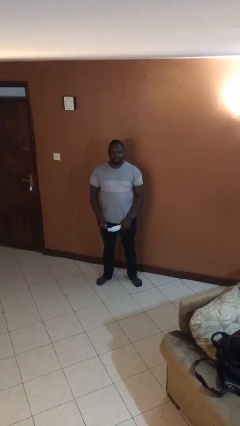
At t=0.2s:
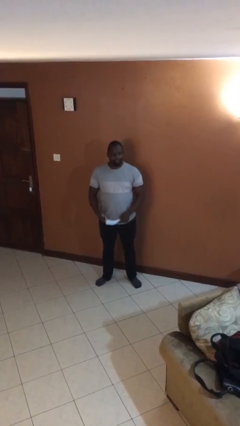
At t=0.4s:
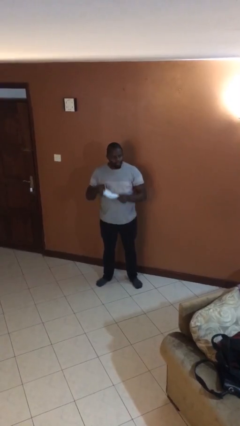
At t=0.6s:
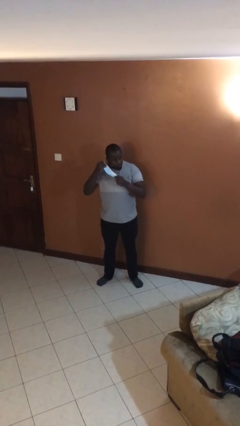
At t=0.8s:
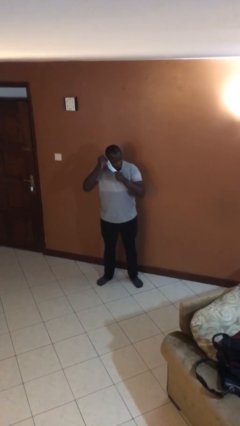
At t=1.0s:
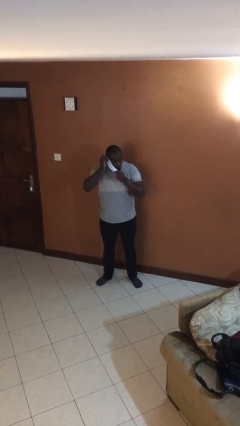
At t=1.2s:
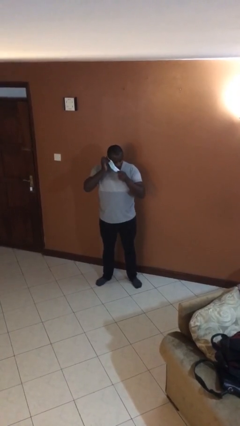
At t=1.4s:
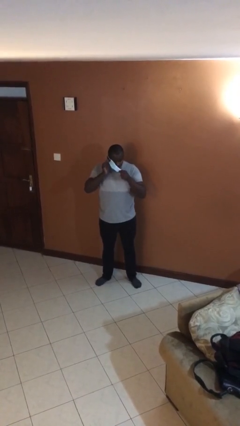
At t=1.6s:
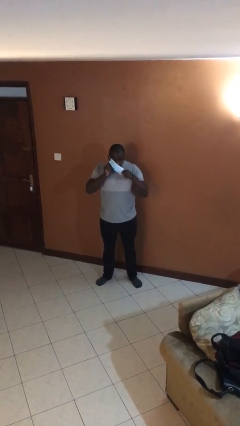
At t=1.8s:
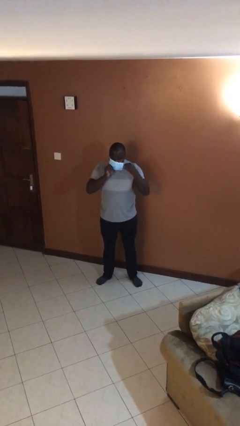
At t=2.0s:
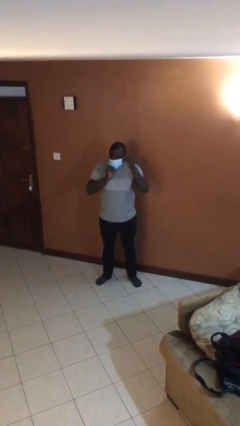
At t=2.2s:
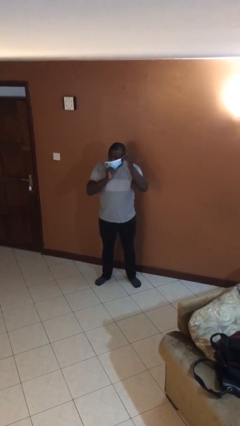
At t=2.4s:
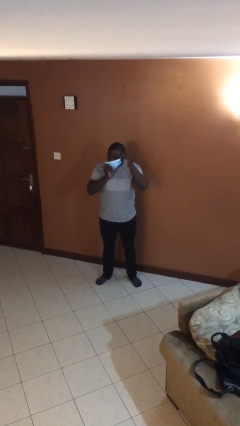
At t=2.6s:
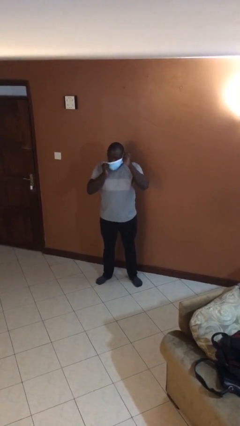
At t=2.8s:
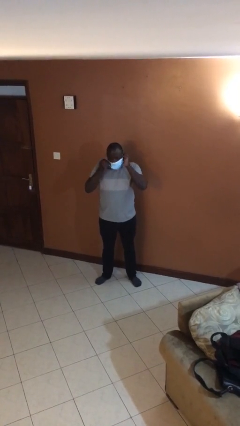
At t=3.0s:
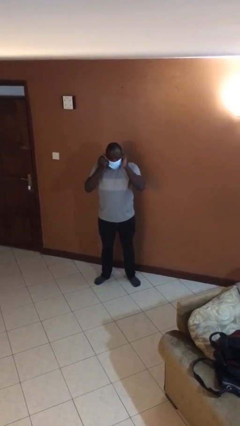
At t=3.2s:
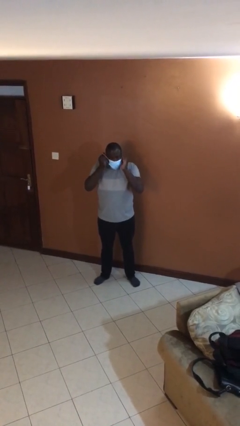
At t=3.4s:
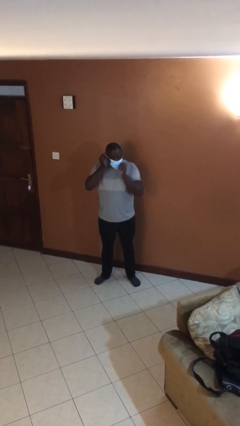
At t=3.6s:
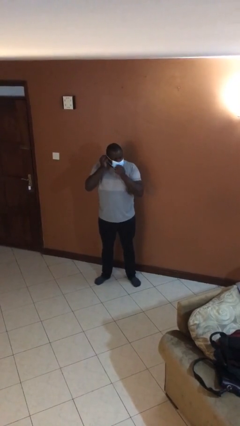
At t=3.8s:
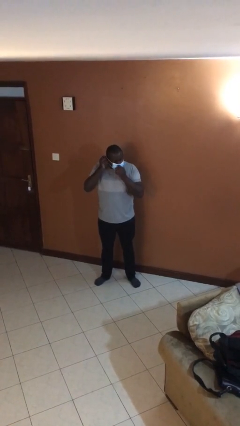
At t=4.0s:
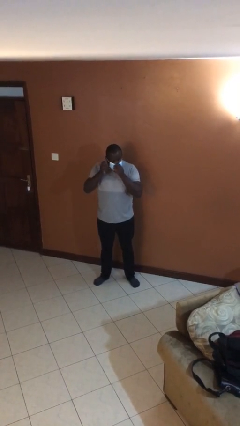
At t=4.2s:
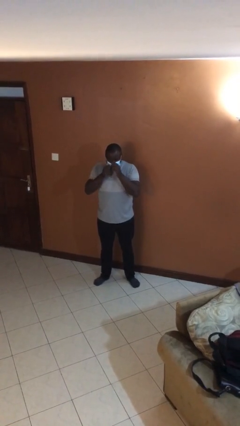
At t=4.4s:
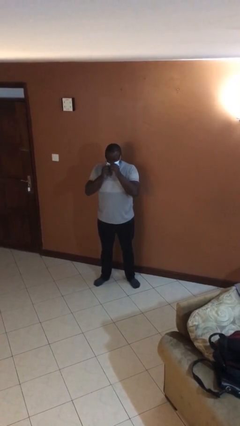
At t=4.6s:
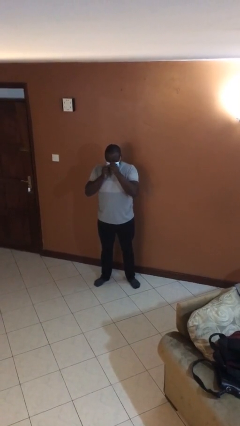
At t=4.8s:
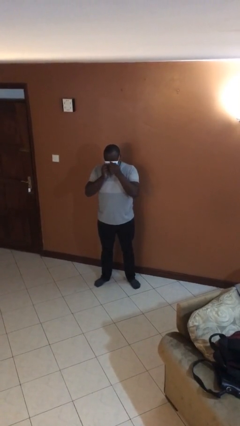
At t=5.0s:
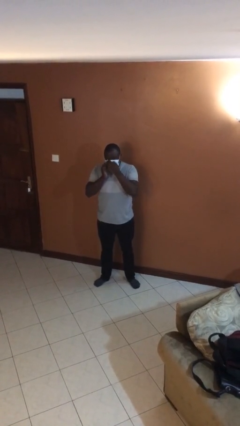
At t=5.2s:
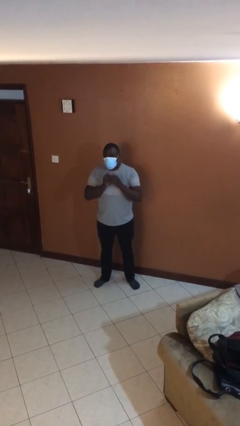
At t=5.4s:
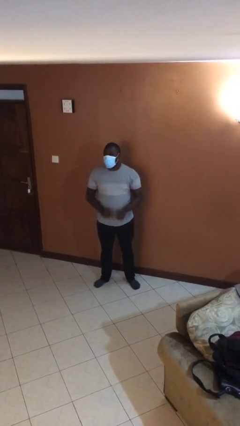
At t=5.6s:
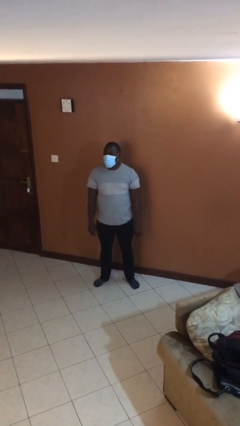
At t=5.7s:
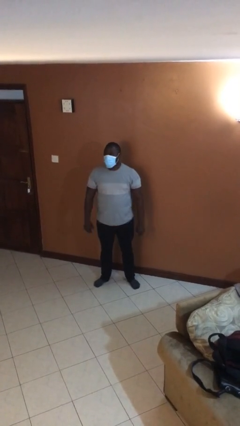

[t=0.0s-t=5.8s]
person puts on facemask

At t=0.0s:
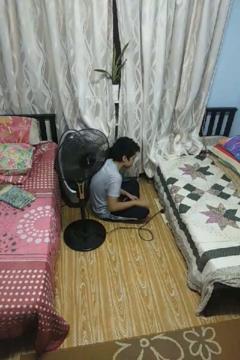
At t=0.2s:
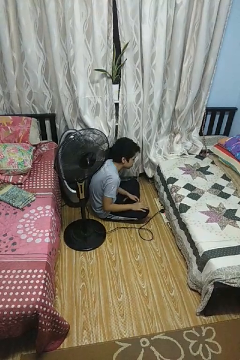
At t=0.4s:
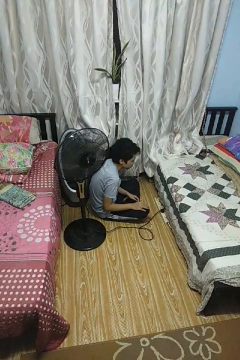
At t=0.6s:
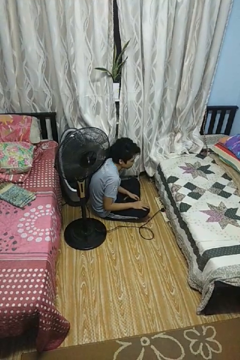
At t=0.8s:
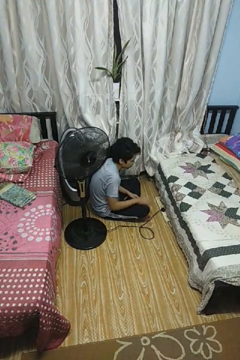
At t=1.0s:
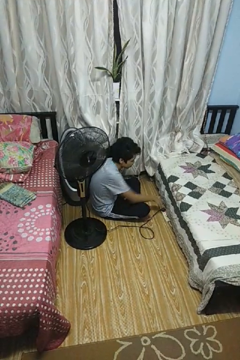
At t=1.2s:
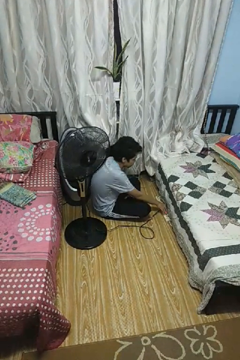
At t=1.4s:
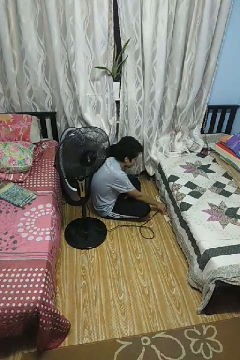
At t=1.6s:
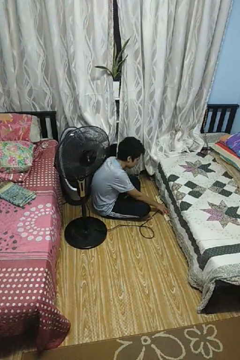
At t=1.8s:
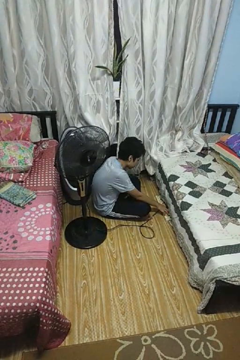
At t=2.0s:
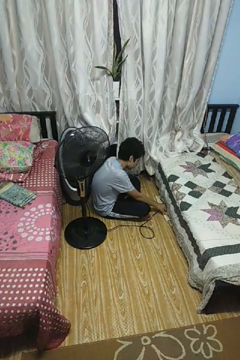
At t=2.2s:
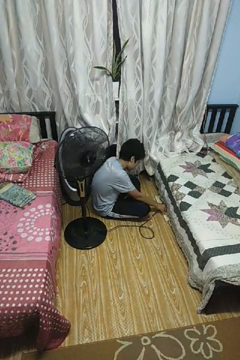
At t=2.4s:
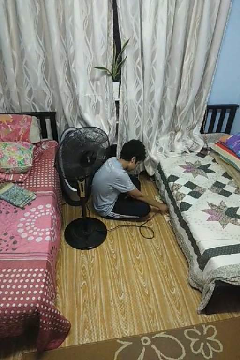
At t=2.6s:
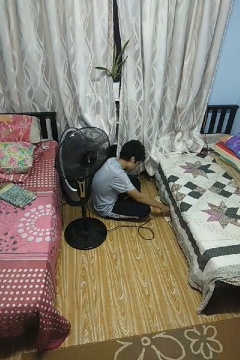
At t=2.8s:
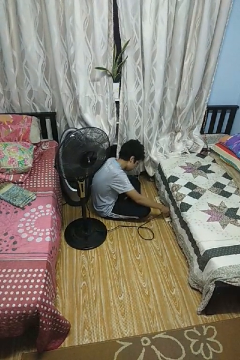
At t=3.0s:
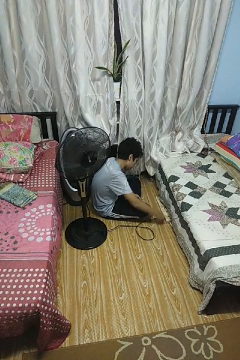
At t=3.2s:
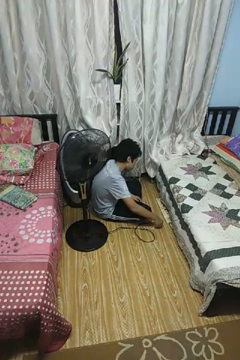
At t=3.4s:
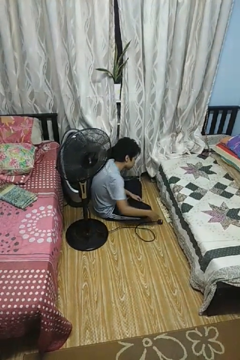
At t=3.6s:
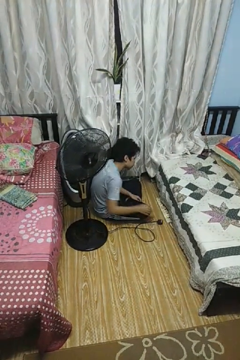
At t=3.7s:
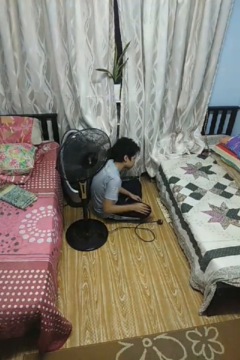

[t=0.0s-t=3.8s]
person unplugs from electrical socket

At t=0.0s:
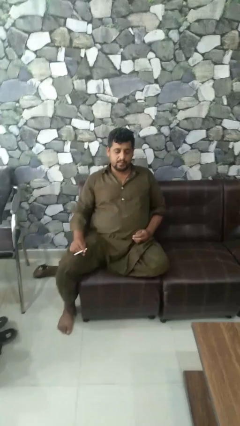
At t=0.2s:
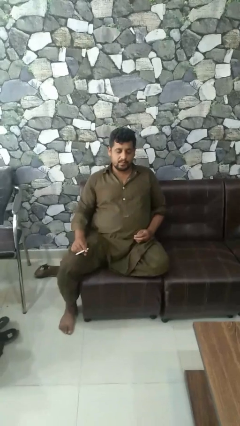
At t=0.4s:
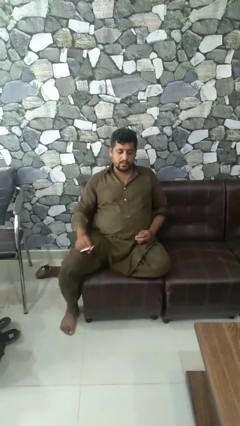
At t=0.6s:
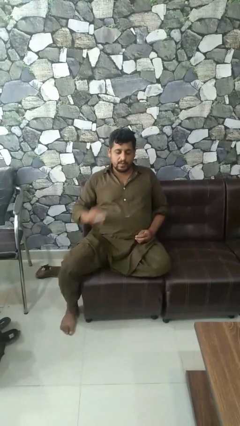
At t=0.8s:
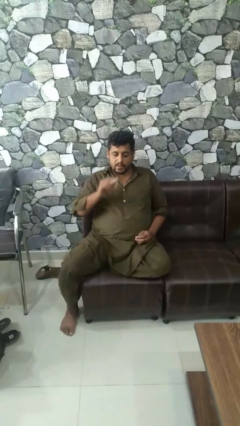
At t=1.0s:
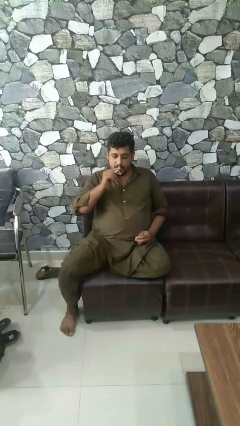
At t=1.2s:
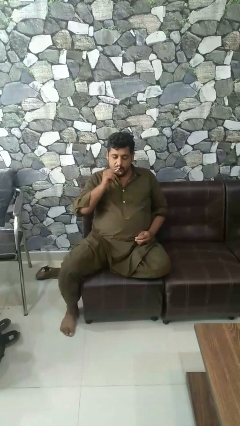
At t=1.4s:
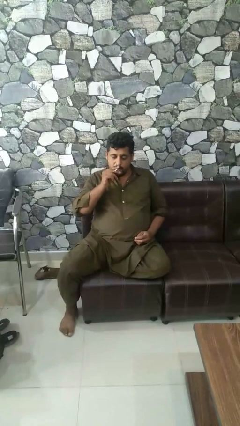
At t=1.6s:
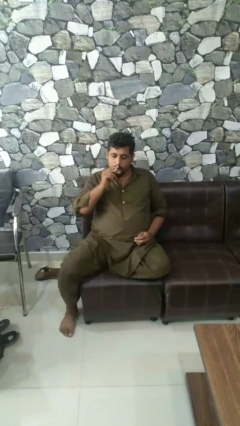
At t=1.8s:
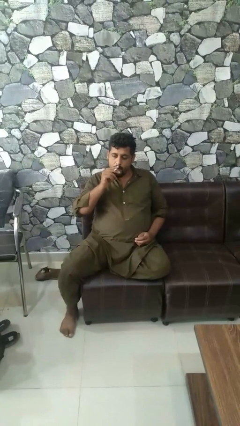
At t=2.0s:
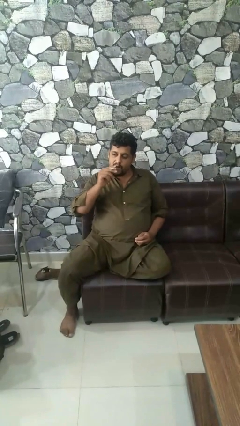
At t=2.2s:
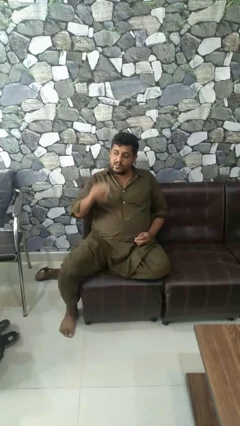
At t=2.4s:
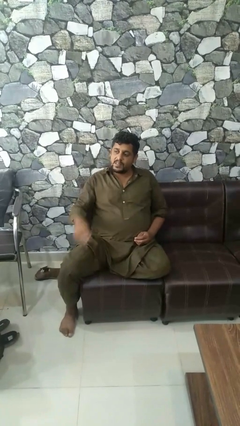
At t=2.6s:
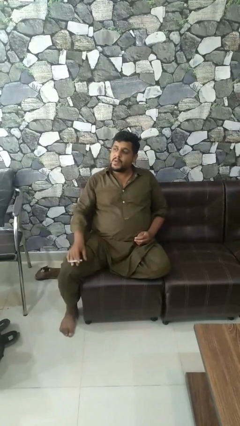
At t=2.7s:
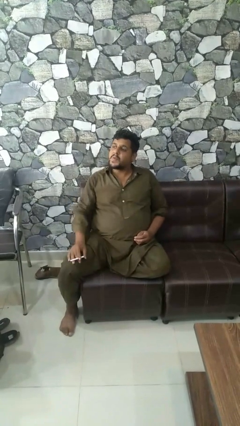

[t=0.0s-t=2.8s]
person vapes

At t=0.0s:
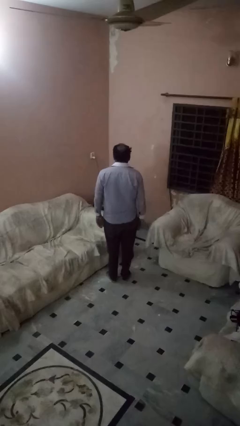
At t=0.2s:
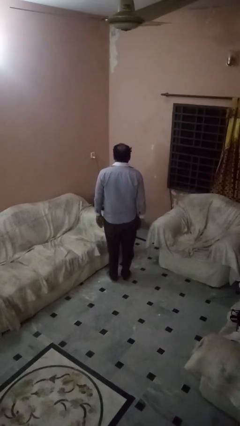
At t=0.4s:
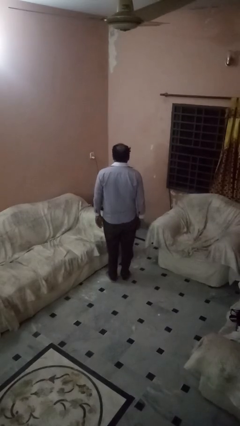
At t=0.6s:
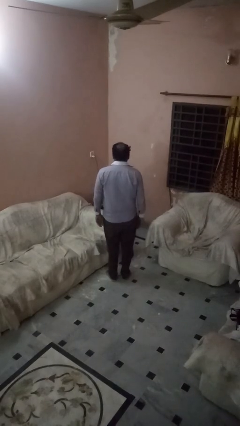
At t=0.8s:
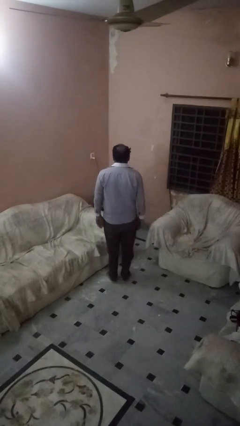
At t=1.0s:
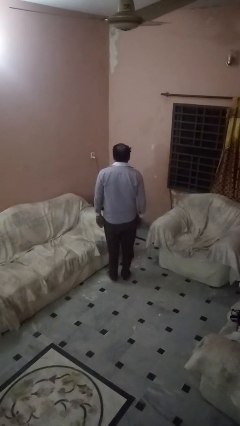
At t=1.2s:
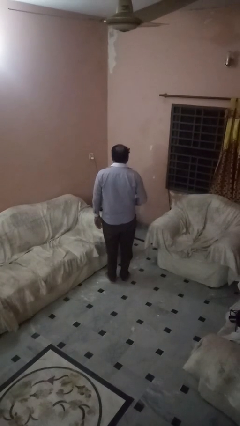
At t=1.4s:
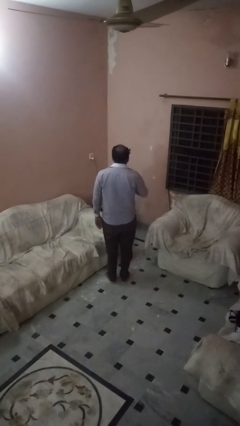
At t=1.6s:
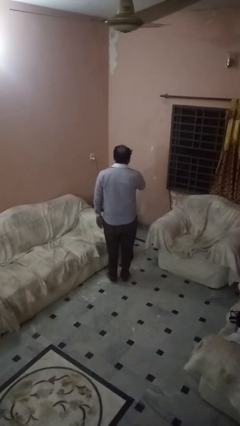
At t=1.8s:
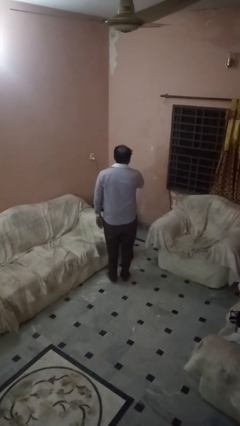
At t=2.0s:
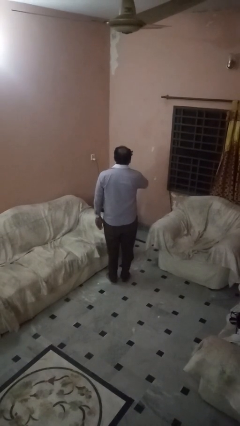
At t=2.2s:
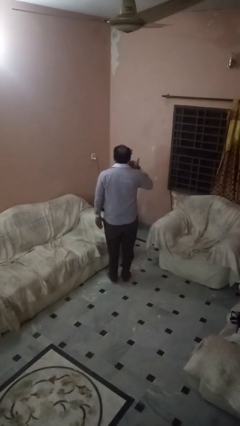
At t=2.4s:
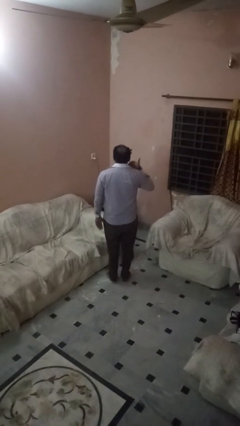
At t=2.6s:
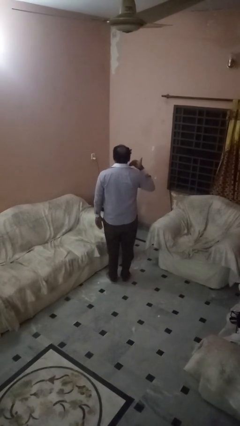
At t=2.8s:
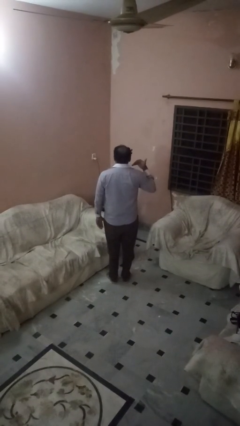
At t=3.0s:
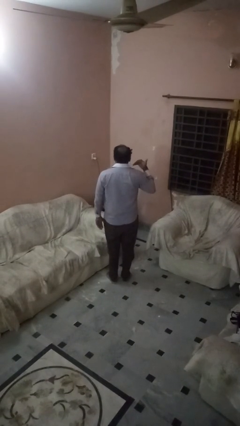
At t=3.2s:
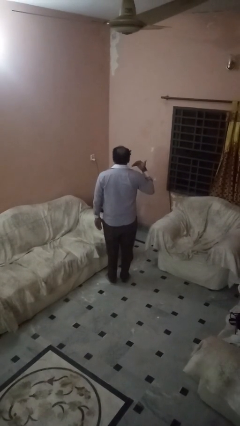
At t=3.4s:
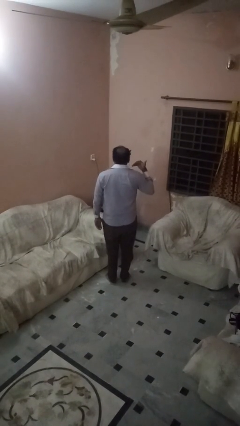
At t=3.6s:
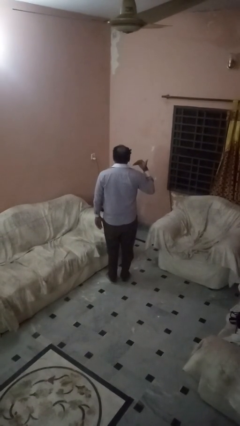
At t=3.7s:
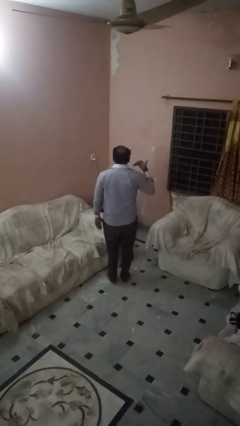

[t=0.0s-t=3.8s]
person gestures cut

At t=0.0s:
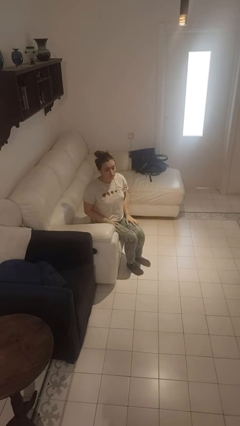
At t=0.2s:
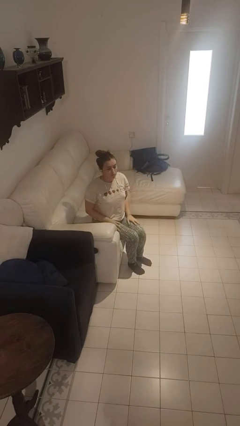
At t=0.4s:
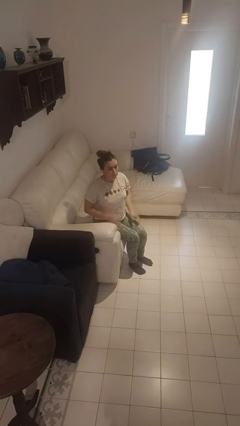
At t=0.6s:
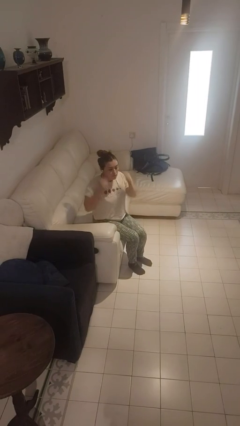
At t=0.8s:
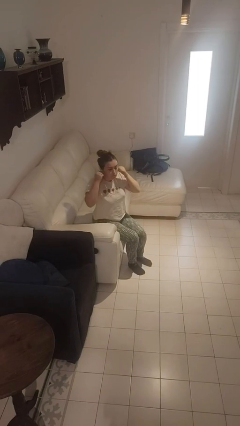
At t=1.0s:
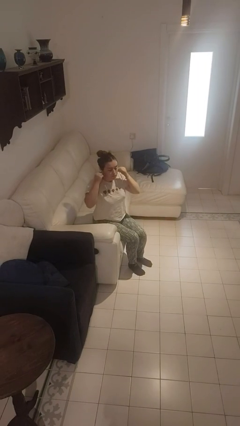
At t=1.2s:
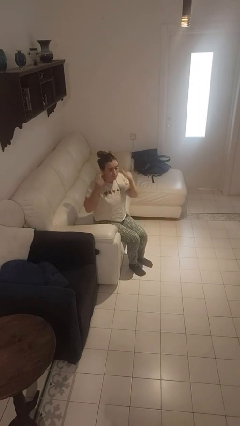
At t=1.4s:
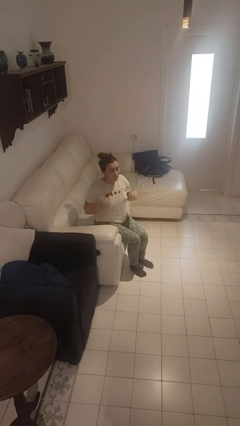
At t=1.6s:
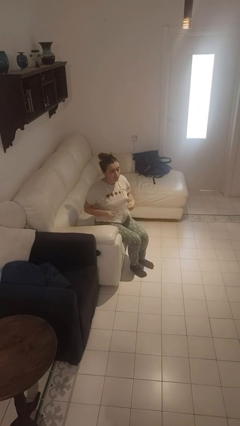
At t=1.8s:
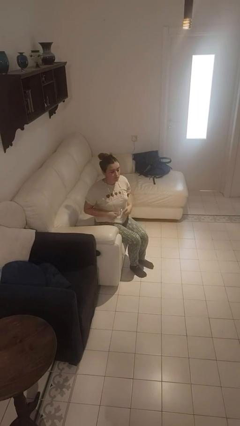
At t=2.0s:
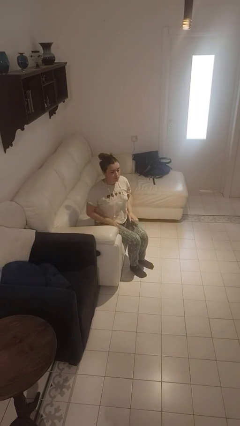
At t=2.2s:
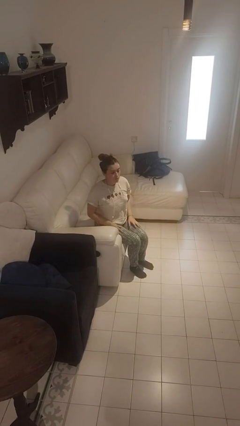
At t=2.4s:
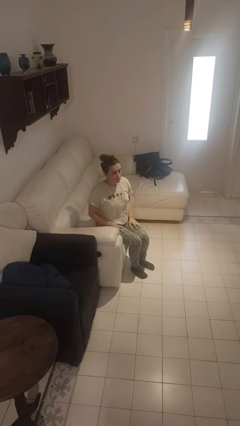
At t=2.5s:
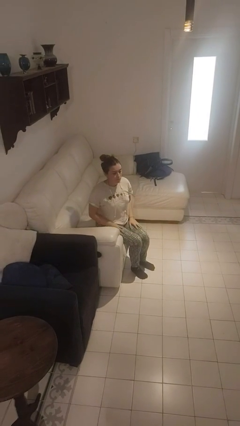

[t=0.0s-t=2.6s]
person takes off headphones
